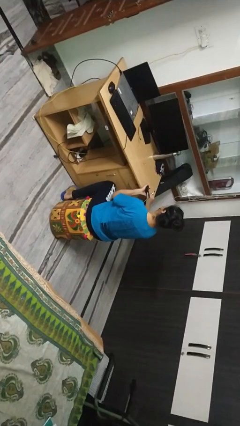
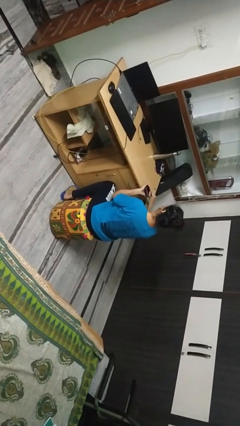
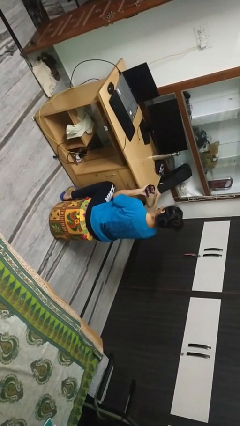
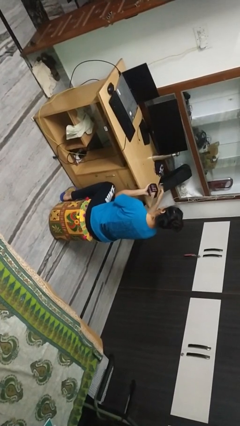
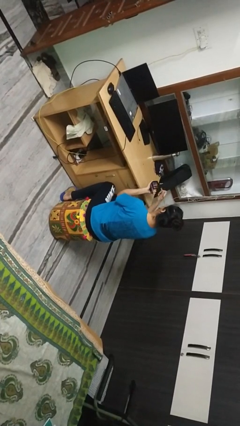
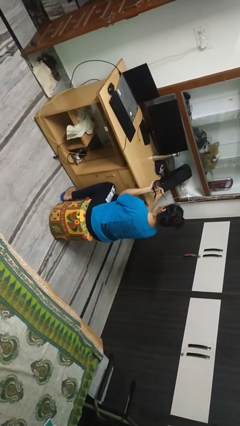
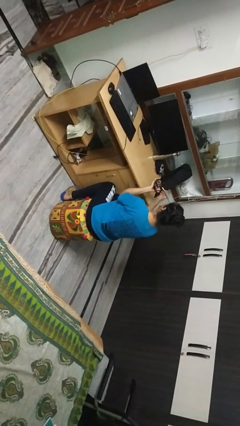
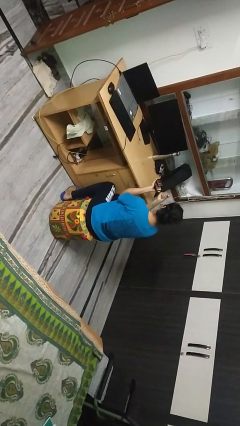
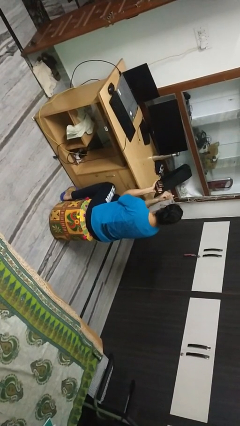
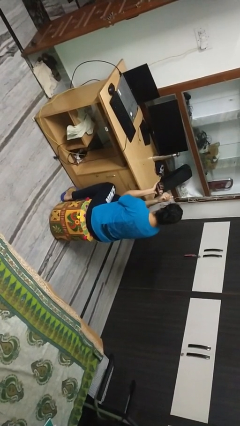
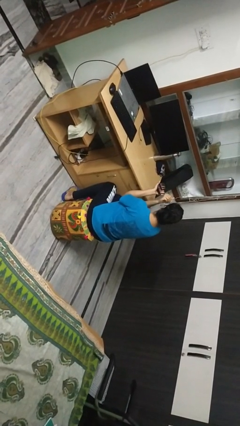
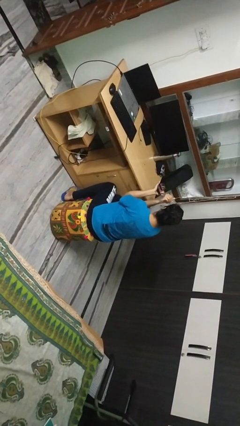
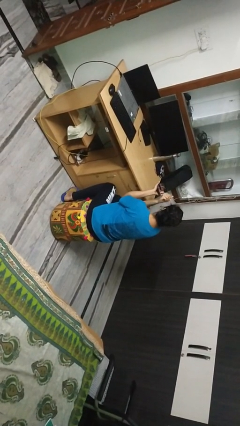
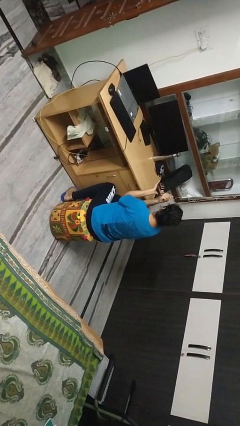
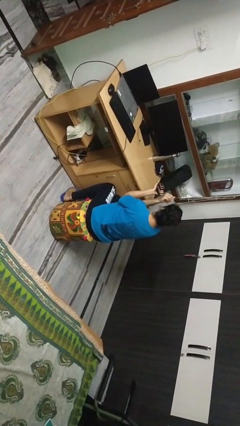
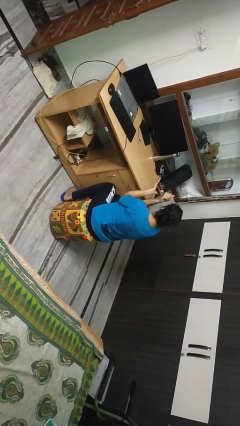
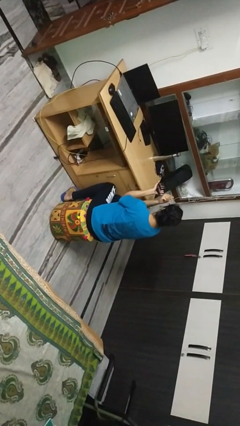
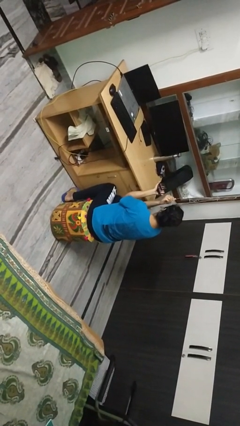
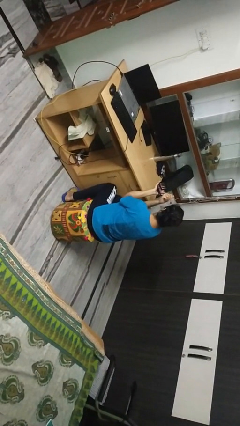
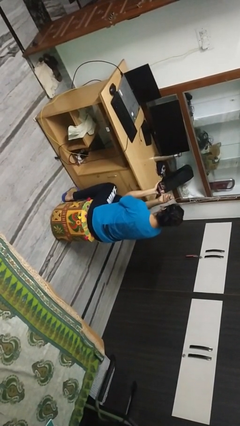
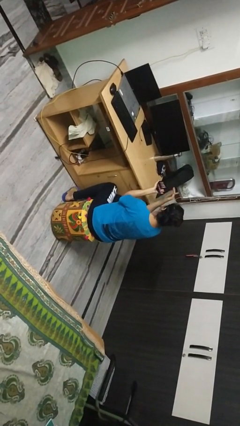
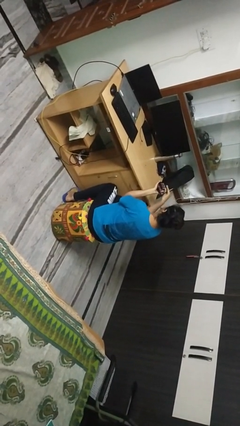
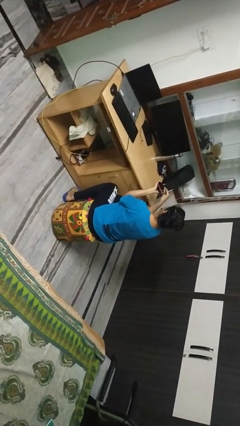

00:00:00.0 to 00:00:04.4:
person applies eye makeup

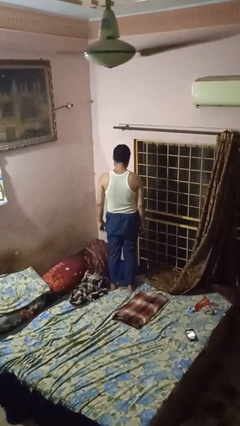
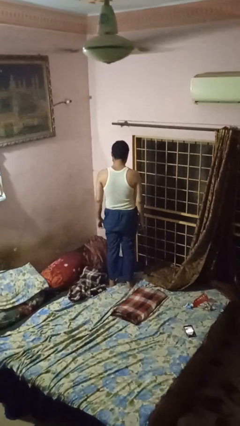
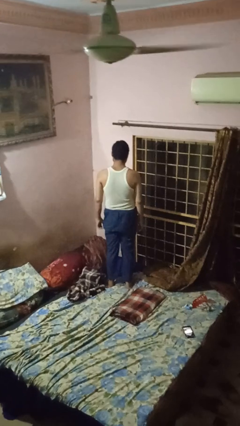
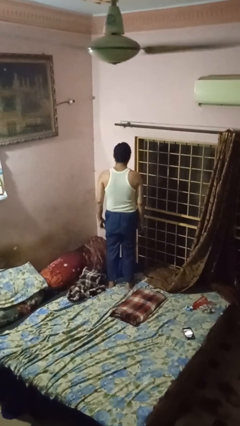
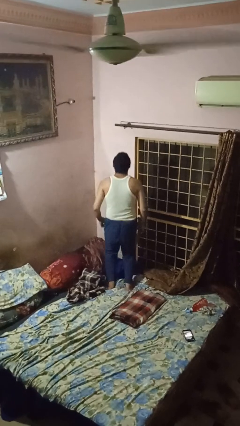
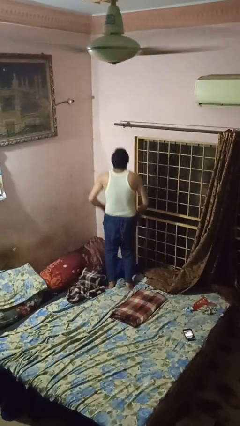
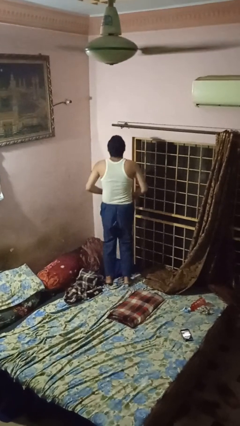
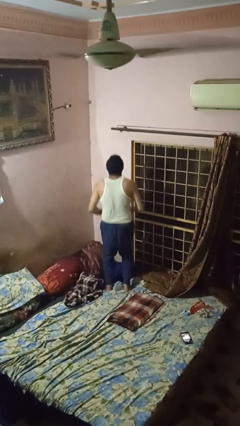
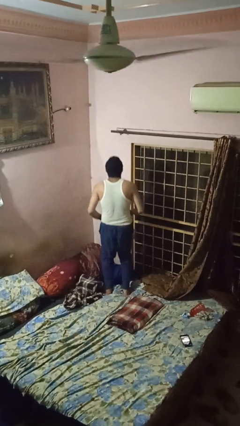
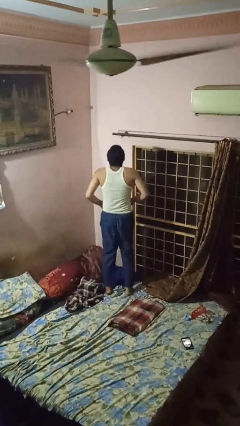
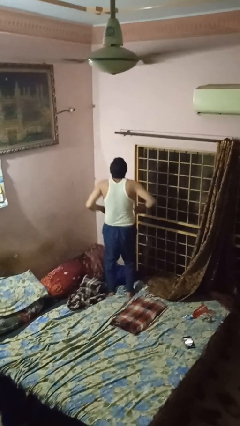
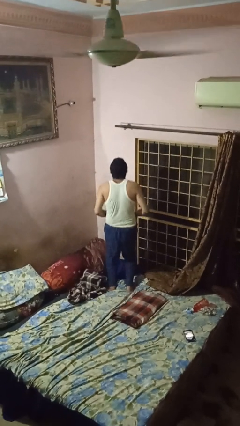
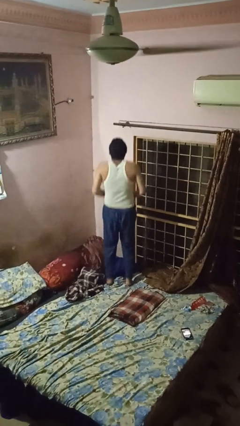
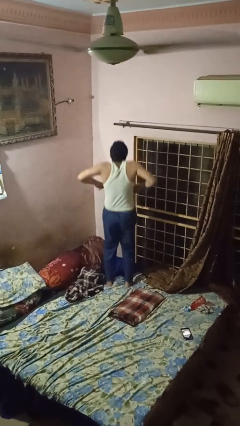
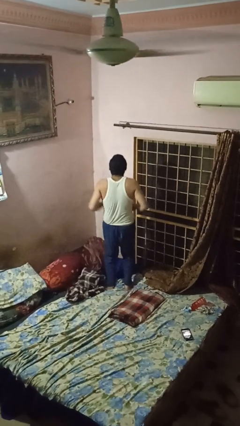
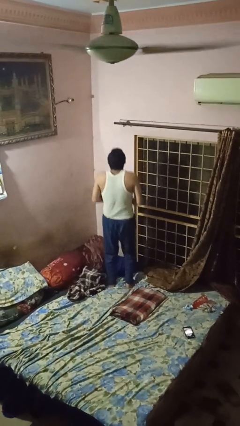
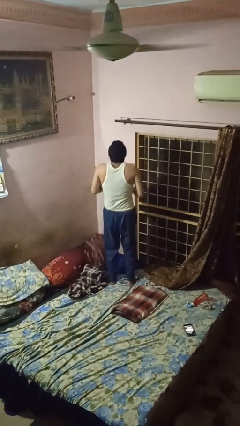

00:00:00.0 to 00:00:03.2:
person jumps on bed

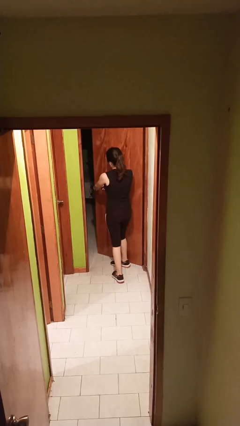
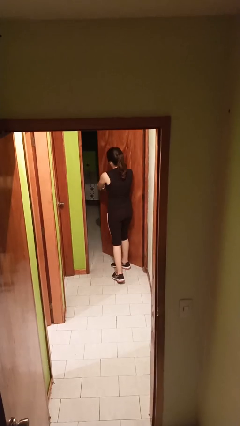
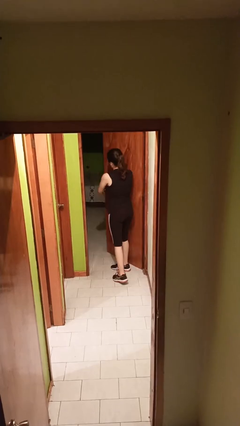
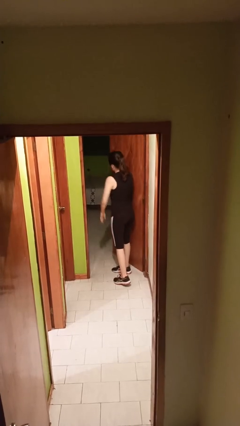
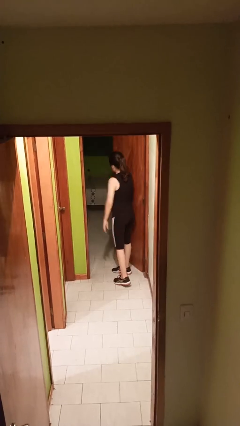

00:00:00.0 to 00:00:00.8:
person opens facility door

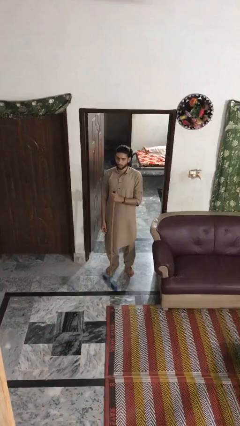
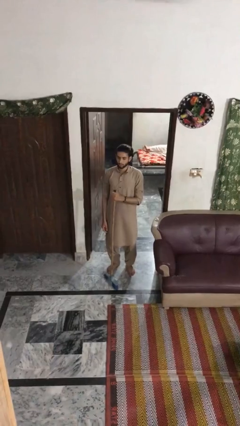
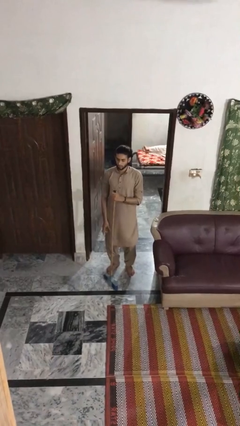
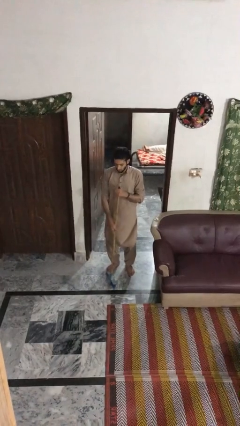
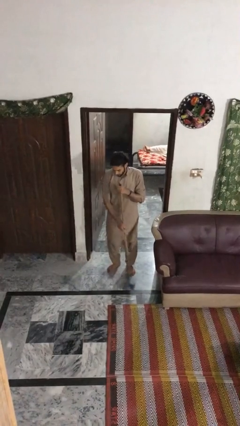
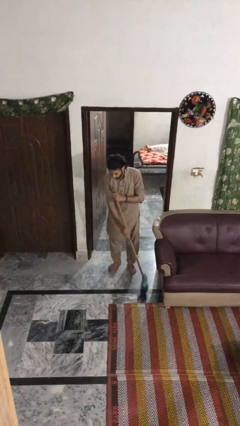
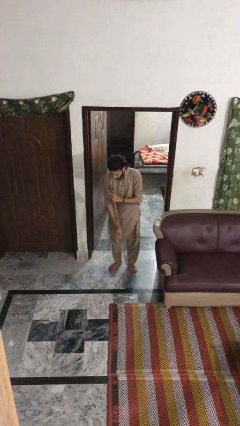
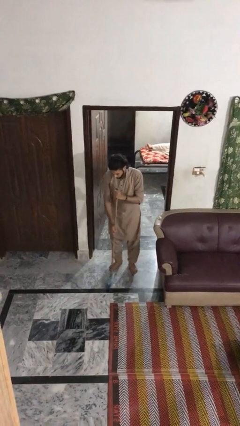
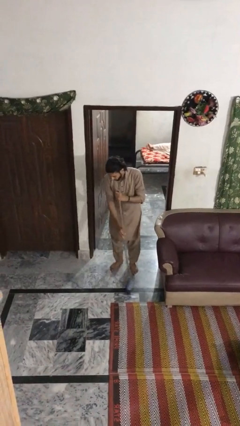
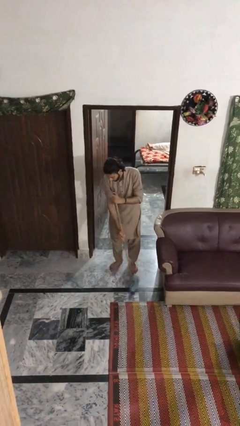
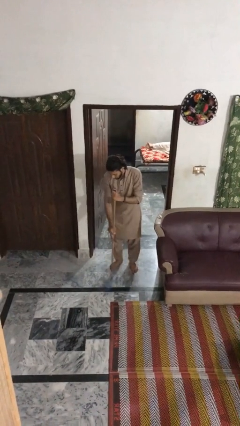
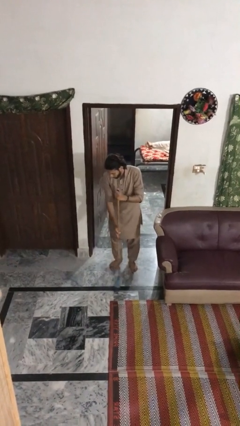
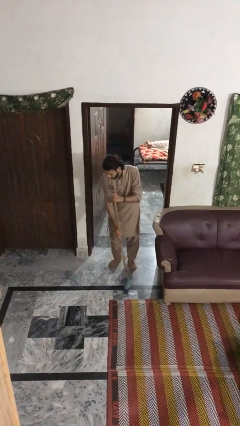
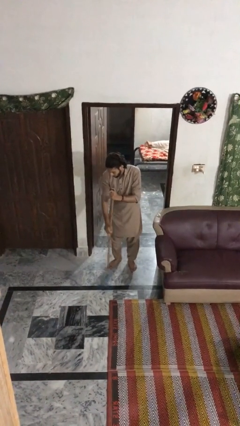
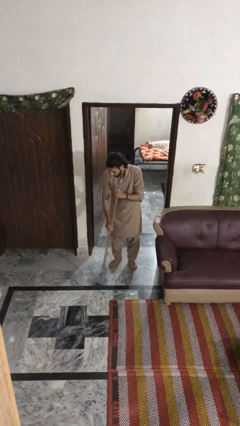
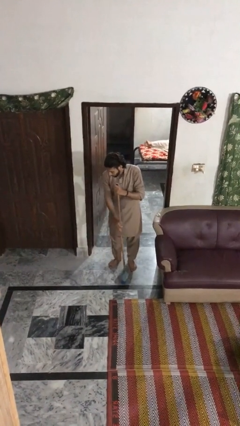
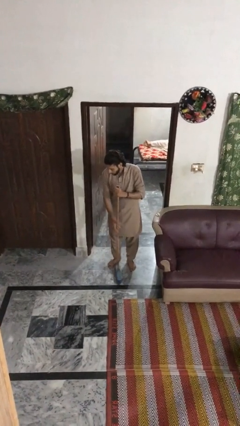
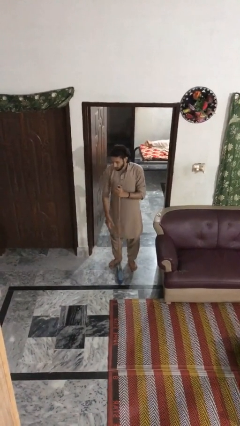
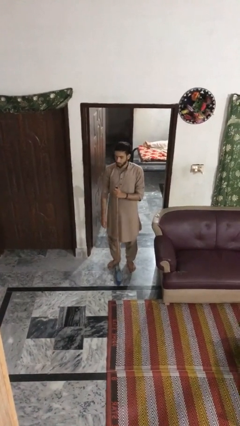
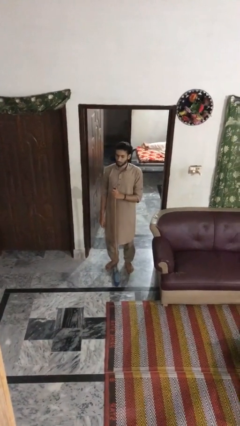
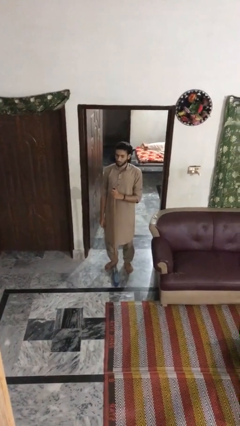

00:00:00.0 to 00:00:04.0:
person sweeps floor

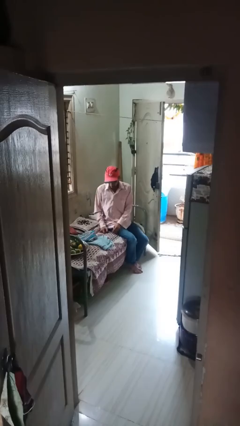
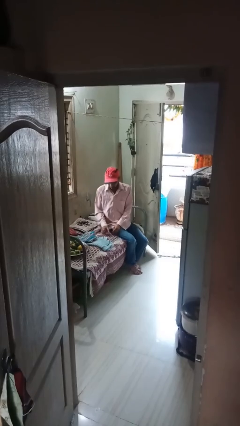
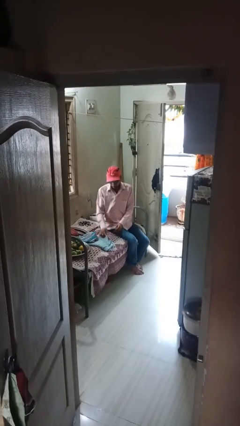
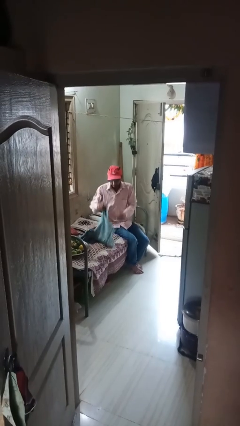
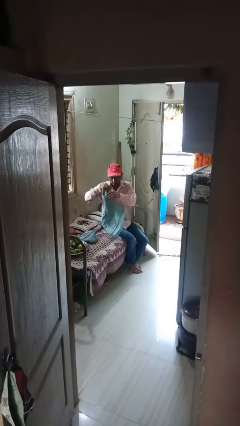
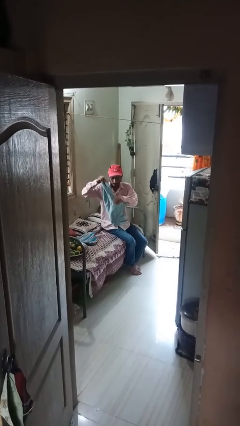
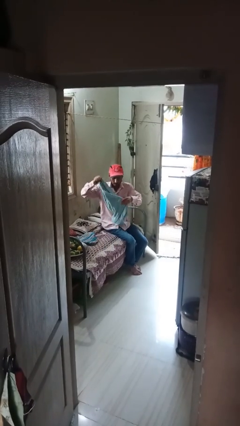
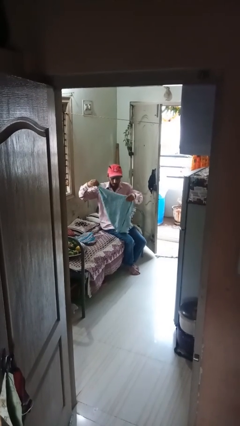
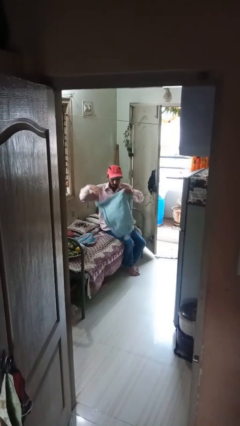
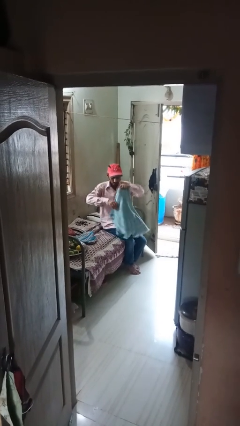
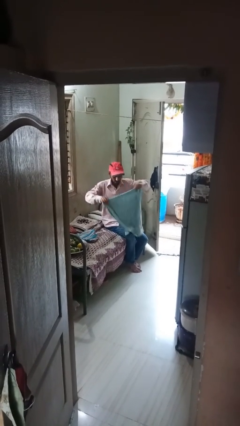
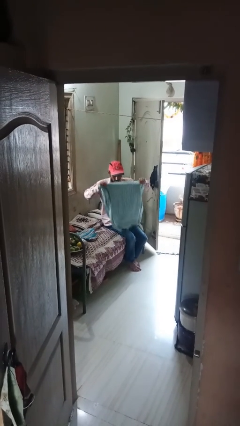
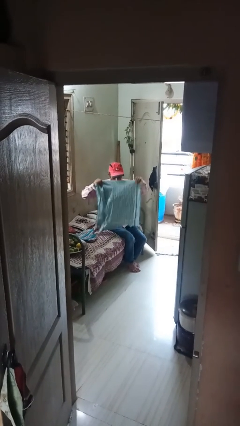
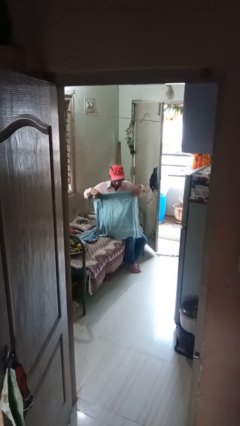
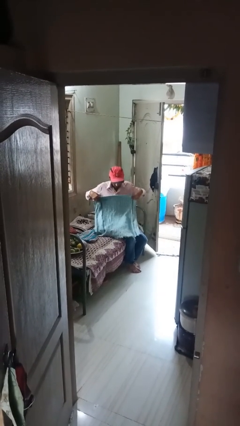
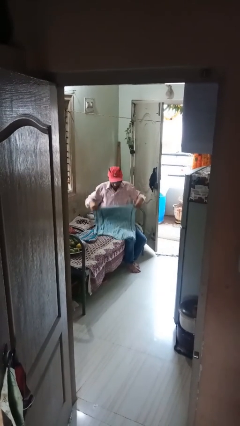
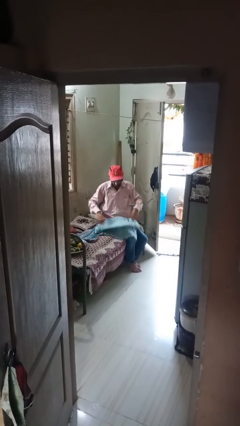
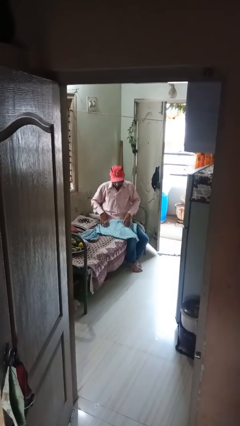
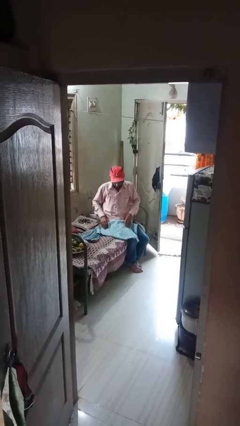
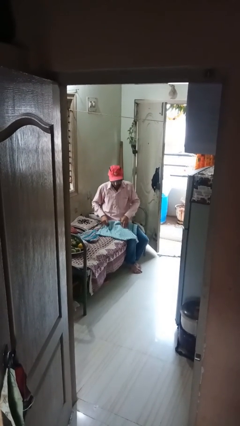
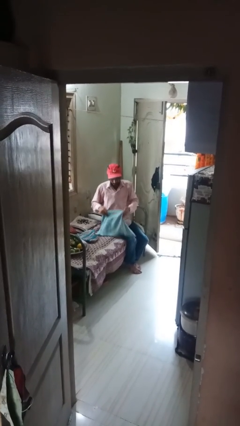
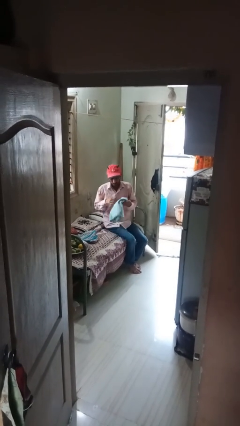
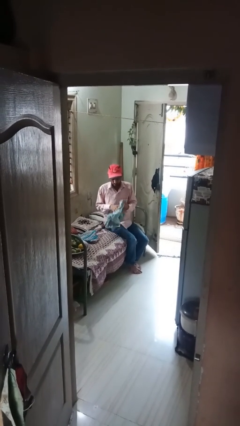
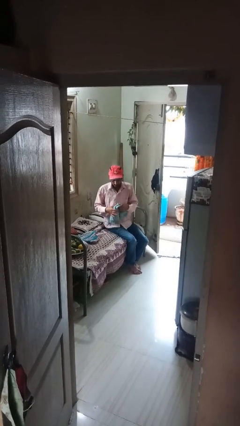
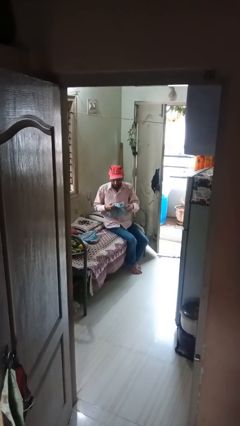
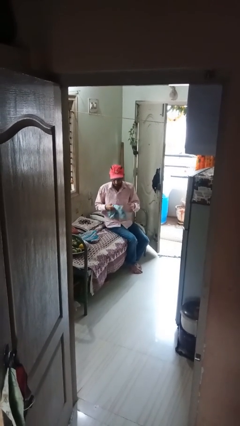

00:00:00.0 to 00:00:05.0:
person folds towel
